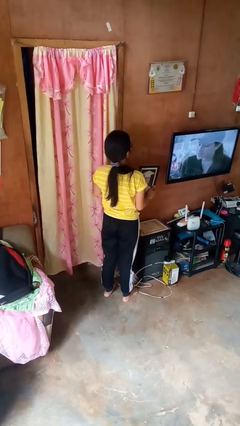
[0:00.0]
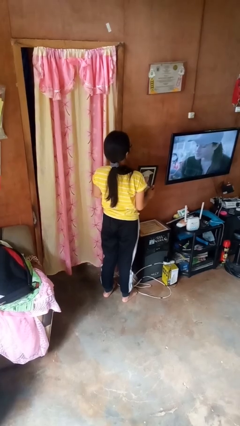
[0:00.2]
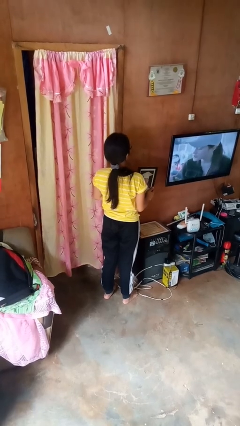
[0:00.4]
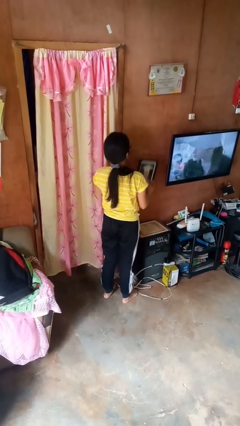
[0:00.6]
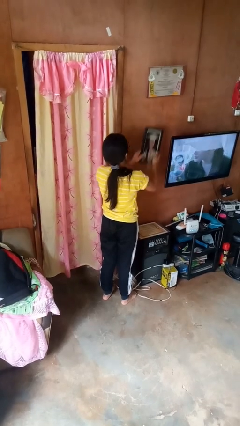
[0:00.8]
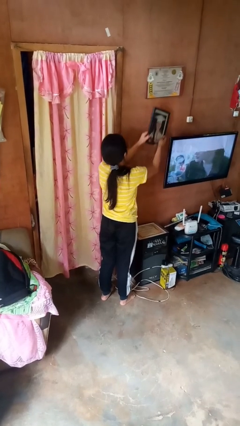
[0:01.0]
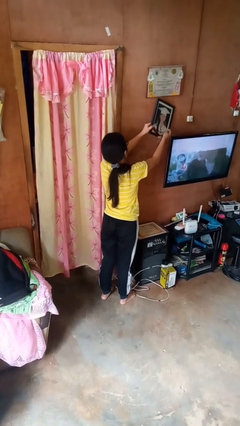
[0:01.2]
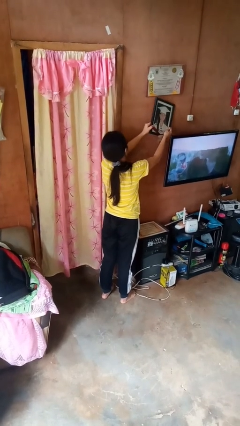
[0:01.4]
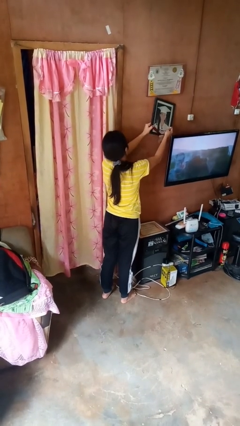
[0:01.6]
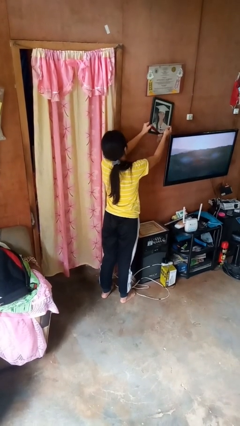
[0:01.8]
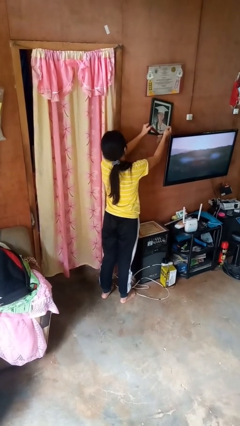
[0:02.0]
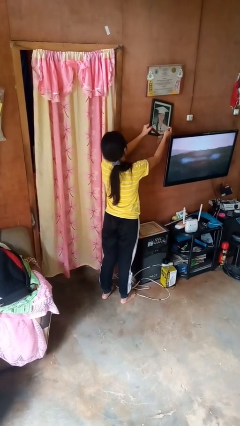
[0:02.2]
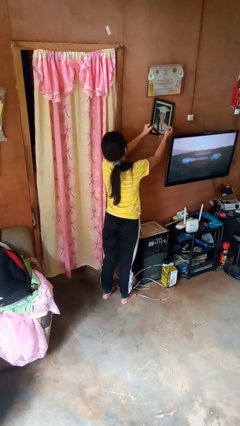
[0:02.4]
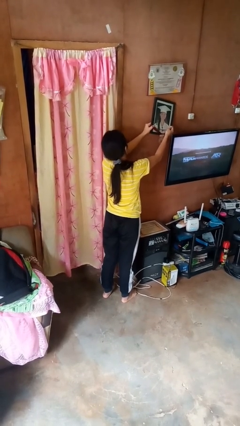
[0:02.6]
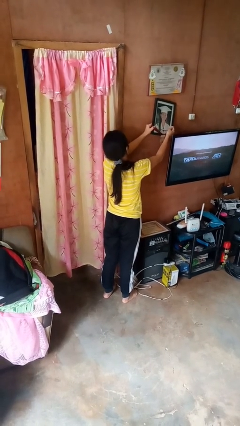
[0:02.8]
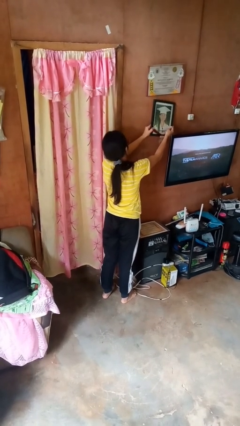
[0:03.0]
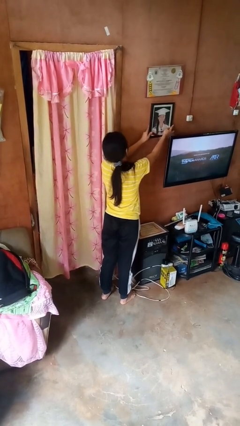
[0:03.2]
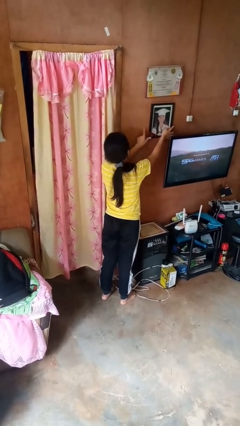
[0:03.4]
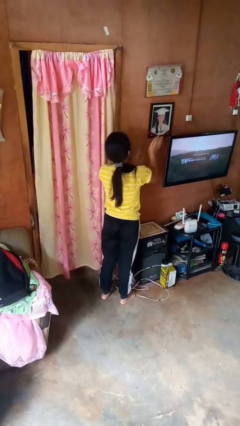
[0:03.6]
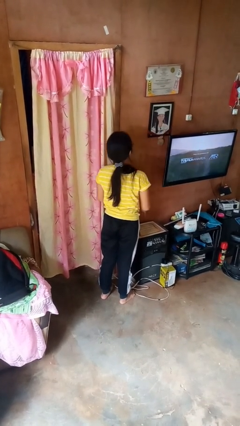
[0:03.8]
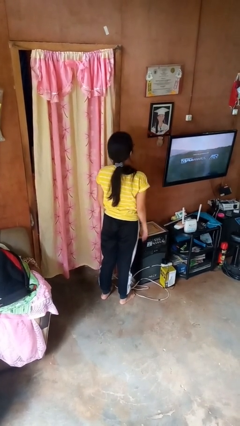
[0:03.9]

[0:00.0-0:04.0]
person puts up picture frame

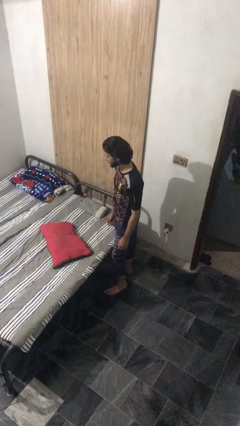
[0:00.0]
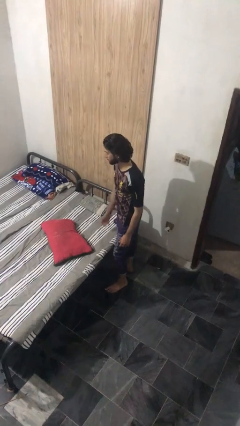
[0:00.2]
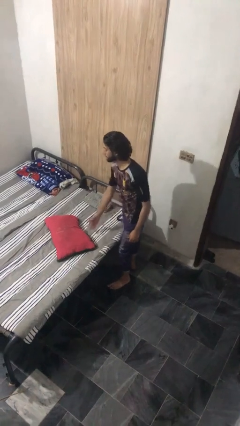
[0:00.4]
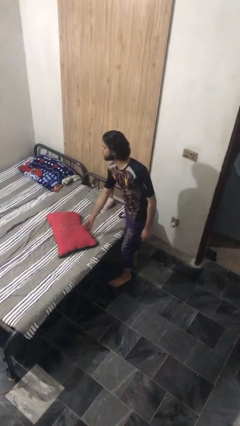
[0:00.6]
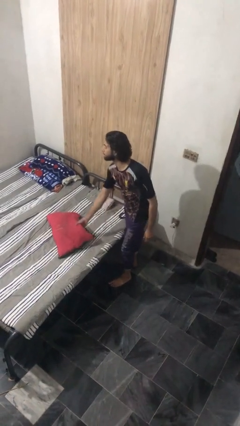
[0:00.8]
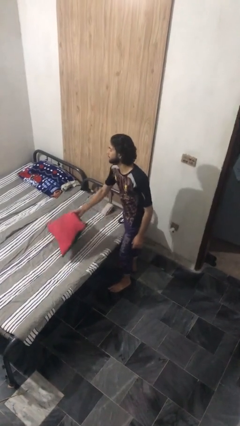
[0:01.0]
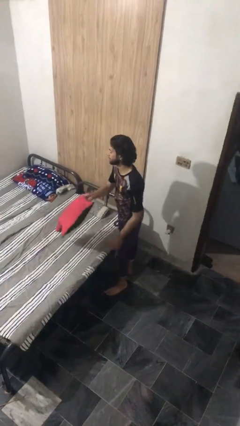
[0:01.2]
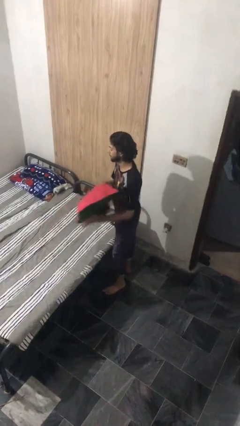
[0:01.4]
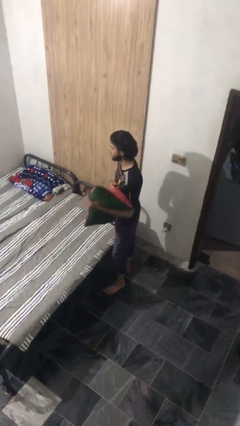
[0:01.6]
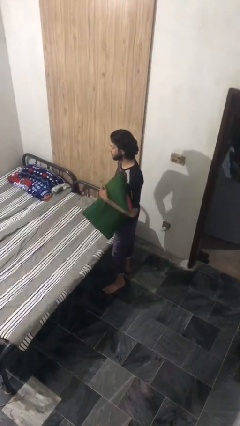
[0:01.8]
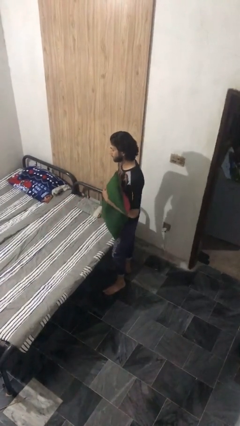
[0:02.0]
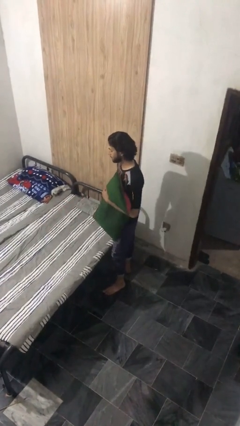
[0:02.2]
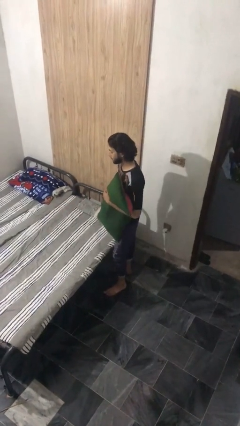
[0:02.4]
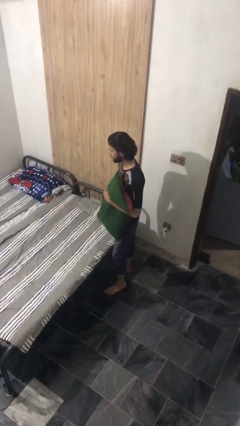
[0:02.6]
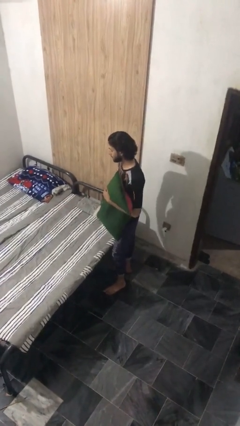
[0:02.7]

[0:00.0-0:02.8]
person picks up object from bed

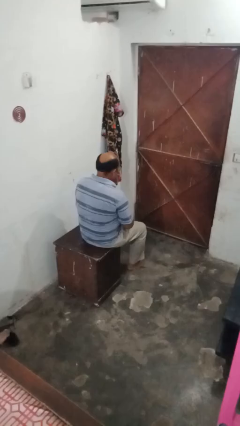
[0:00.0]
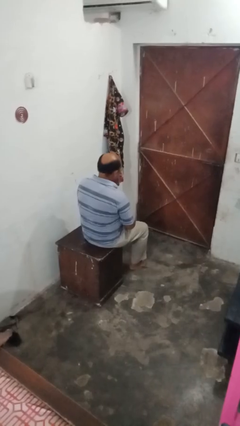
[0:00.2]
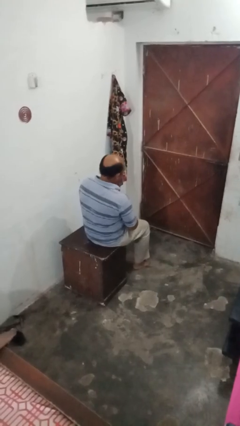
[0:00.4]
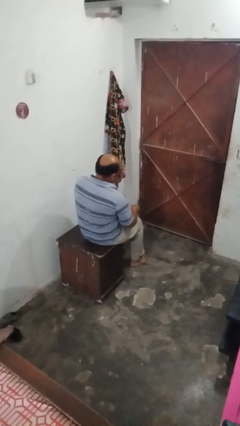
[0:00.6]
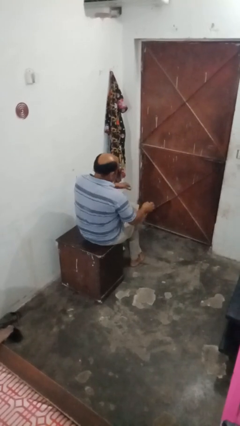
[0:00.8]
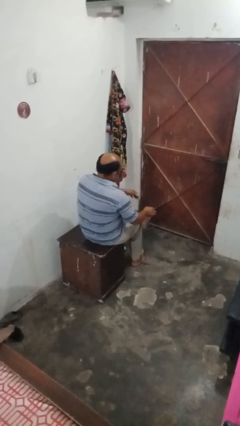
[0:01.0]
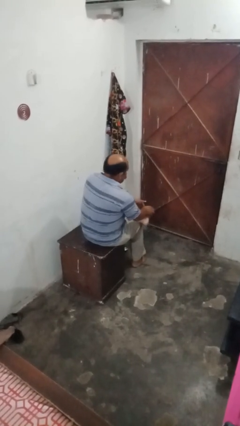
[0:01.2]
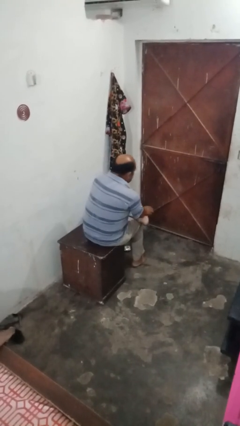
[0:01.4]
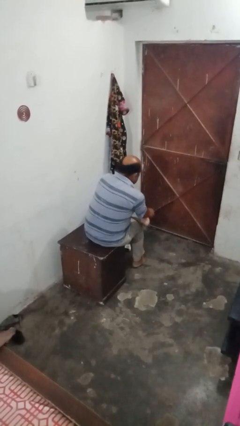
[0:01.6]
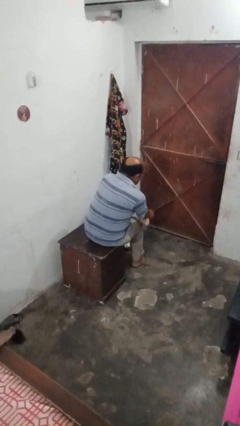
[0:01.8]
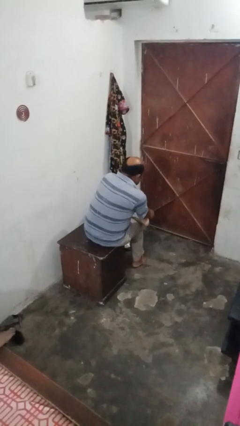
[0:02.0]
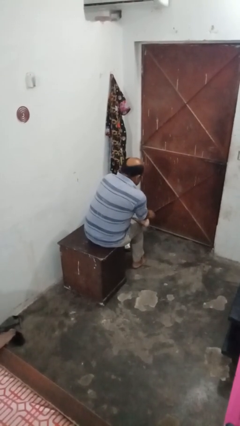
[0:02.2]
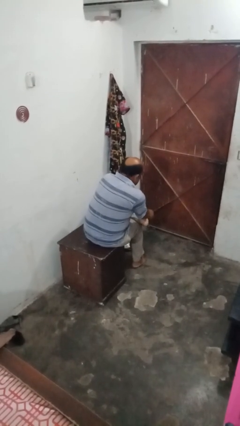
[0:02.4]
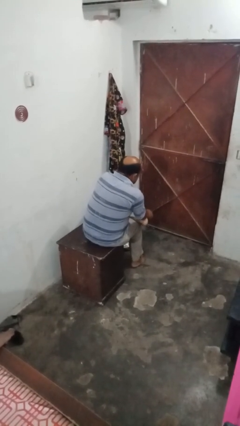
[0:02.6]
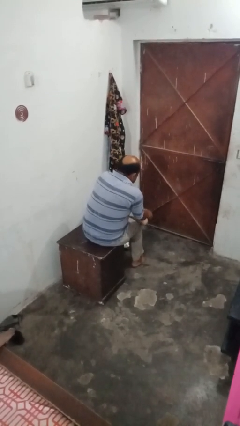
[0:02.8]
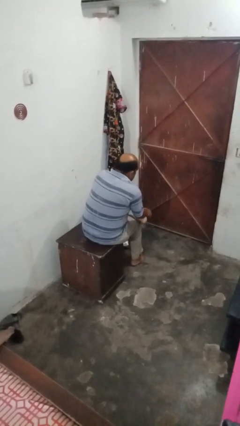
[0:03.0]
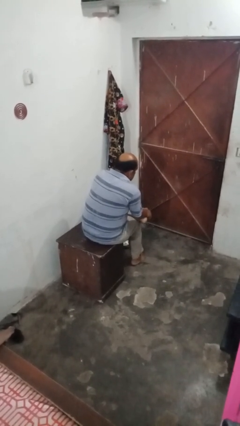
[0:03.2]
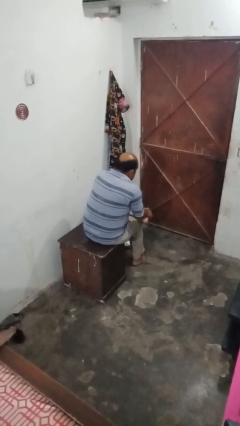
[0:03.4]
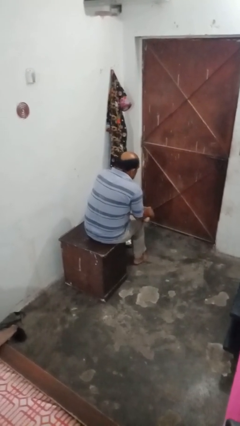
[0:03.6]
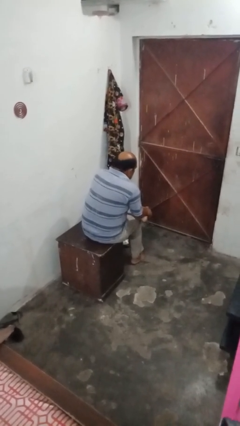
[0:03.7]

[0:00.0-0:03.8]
person rubs foot

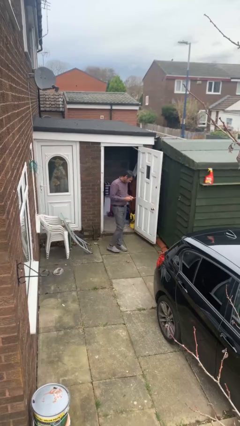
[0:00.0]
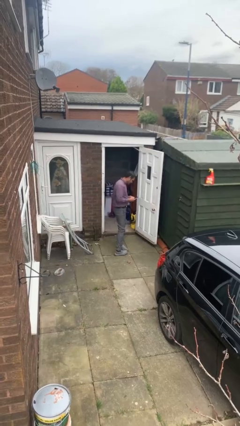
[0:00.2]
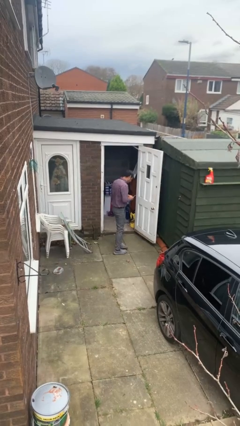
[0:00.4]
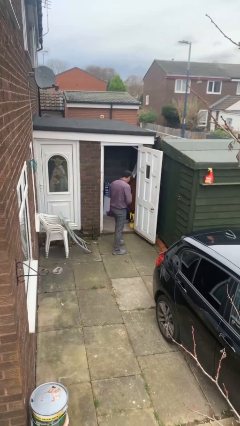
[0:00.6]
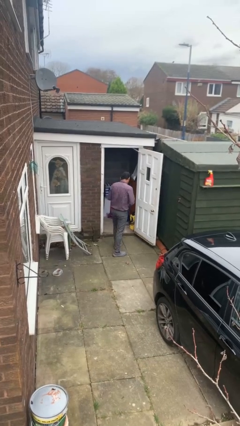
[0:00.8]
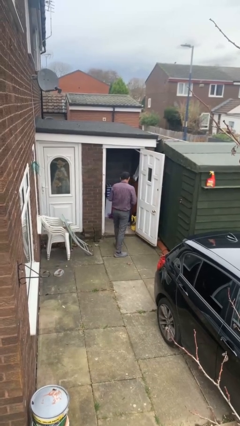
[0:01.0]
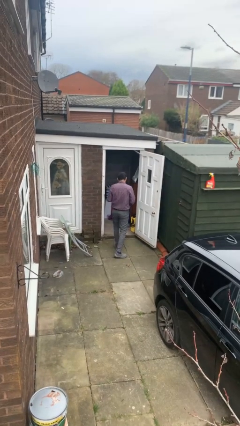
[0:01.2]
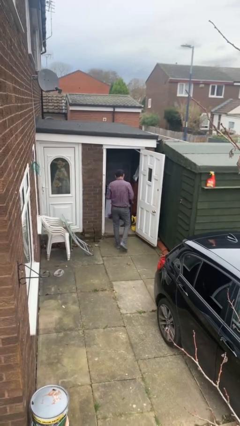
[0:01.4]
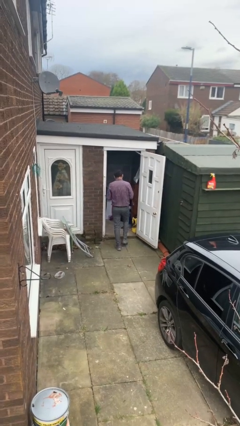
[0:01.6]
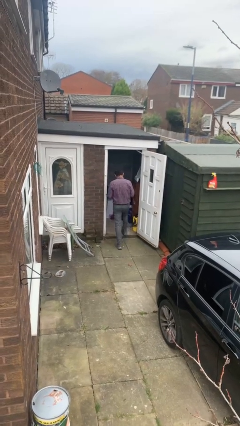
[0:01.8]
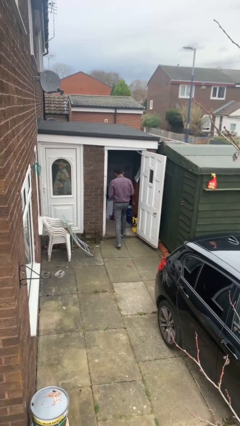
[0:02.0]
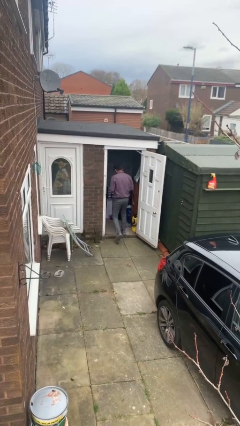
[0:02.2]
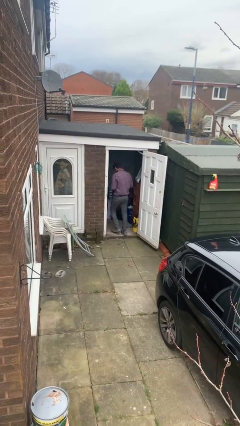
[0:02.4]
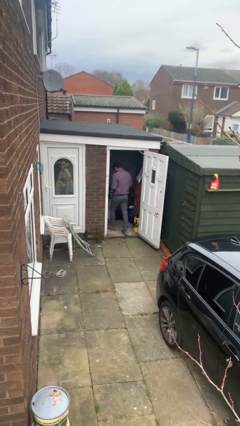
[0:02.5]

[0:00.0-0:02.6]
person exits scene through structure

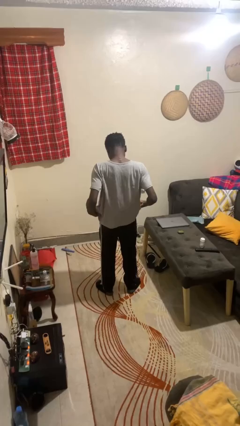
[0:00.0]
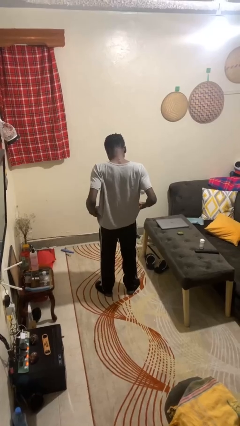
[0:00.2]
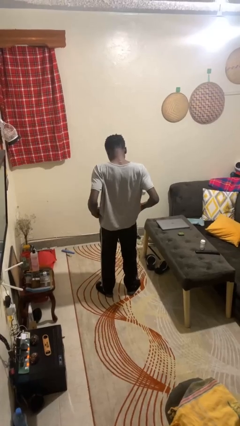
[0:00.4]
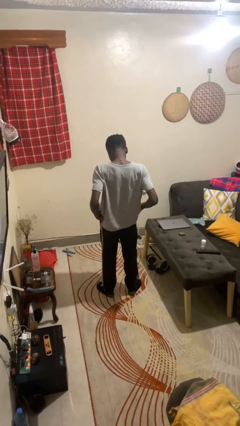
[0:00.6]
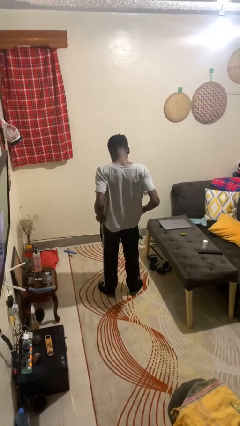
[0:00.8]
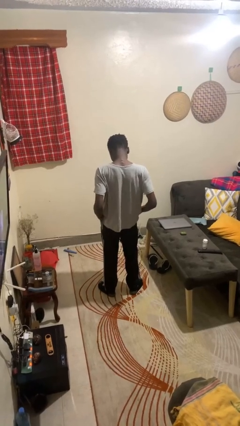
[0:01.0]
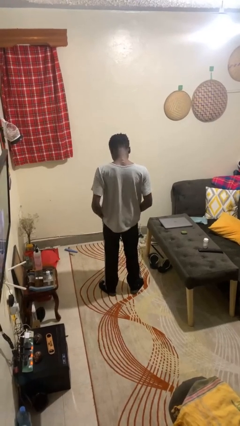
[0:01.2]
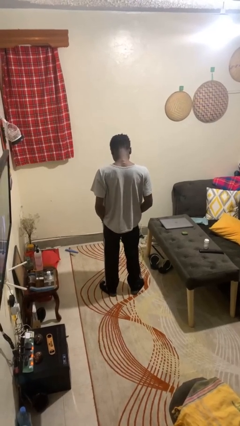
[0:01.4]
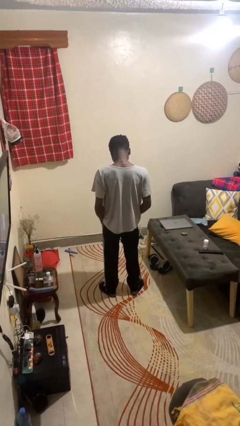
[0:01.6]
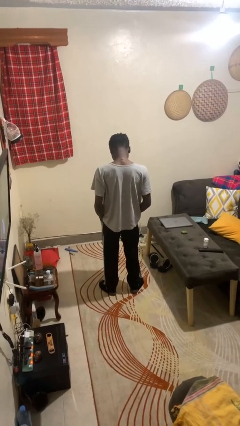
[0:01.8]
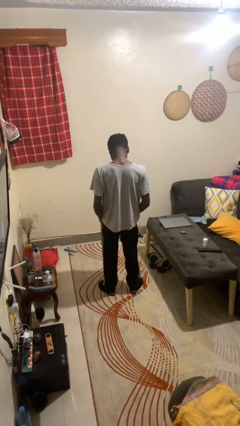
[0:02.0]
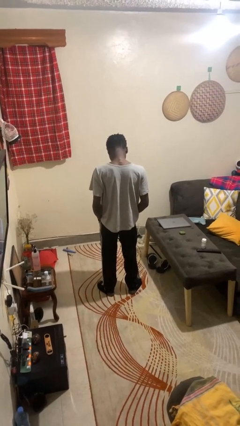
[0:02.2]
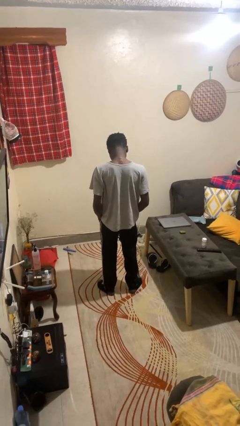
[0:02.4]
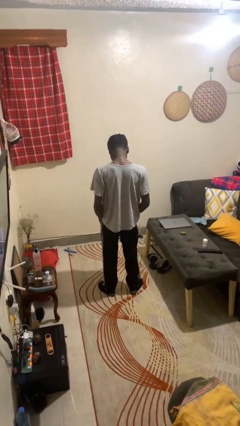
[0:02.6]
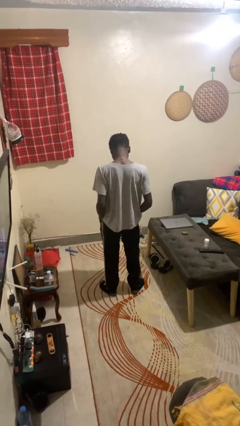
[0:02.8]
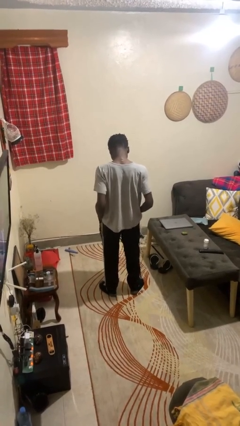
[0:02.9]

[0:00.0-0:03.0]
person puts hands in back pockets

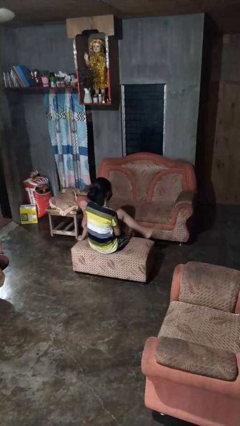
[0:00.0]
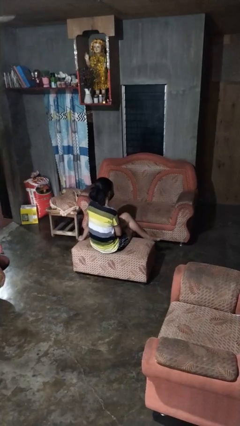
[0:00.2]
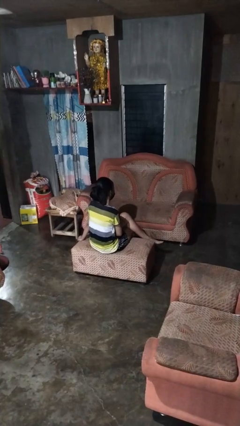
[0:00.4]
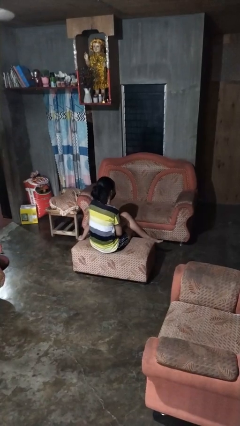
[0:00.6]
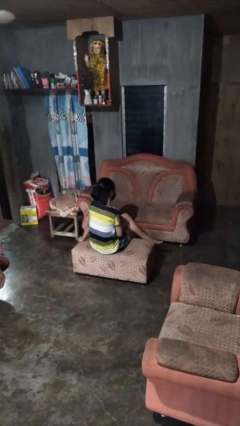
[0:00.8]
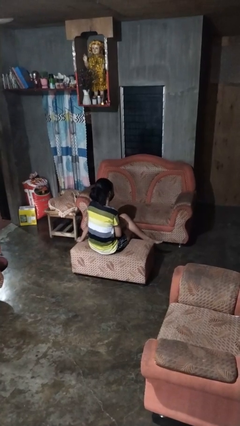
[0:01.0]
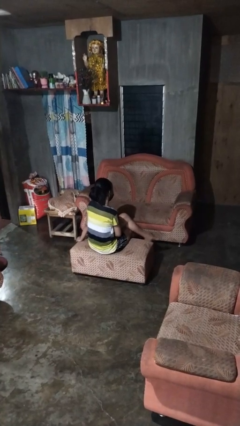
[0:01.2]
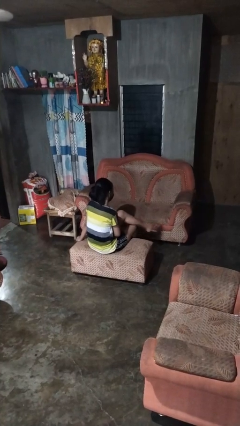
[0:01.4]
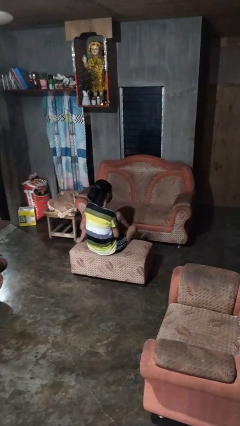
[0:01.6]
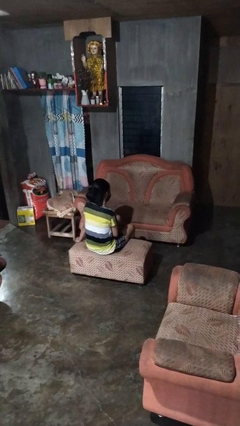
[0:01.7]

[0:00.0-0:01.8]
person crosses legs
